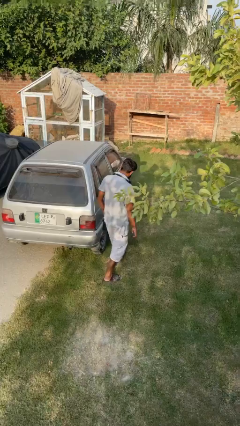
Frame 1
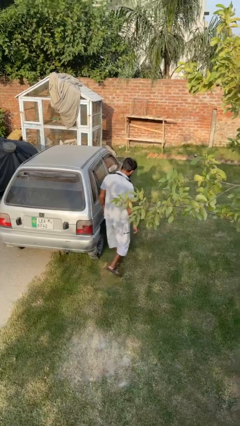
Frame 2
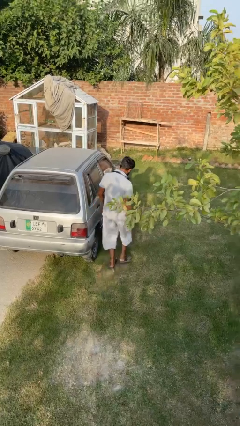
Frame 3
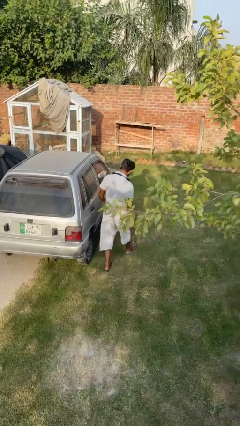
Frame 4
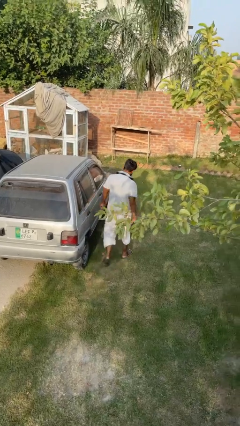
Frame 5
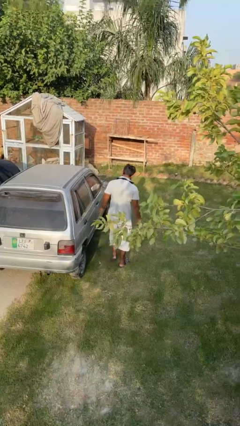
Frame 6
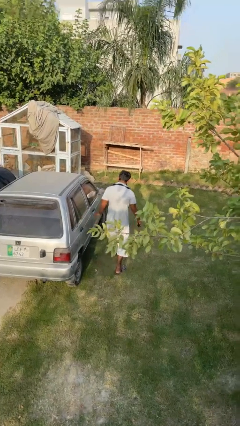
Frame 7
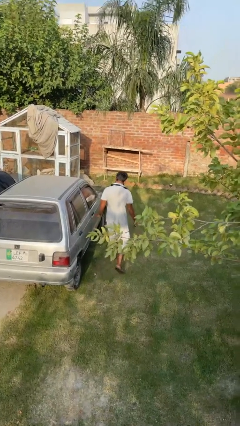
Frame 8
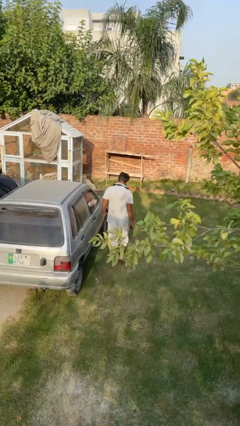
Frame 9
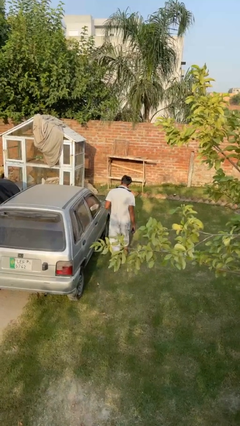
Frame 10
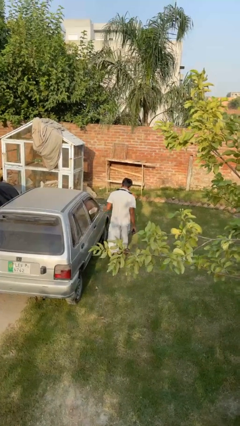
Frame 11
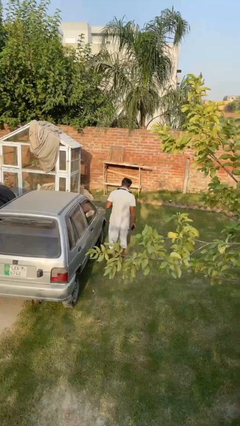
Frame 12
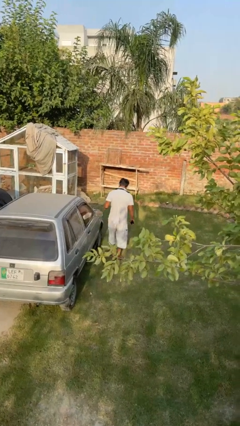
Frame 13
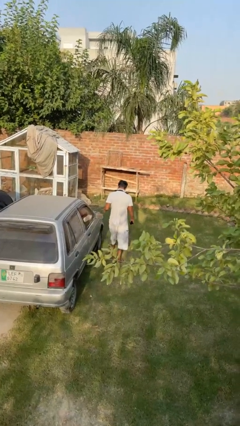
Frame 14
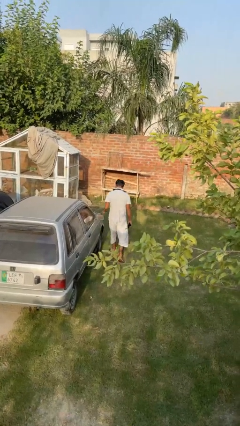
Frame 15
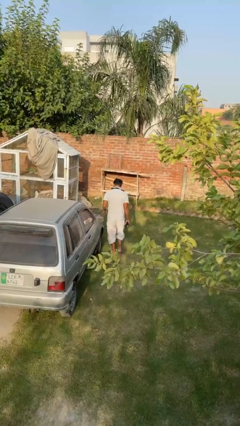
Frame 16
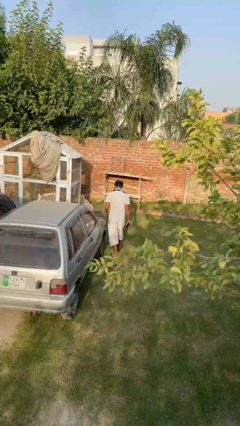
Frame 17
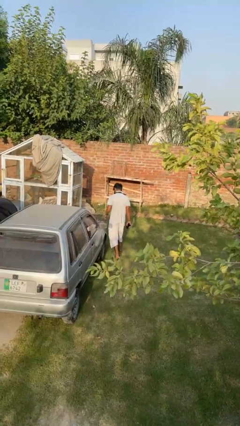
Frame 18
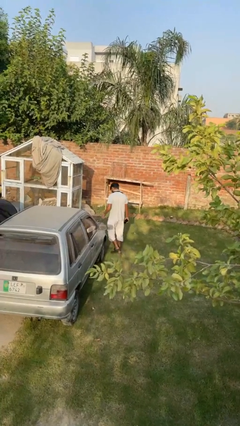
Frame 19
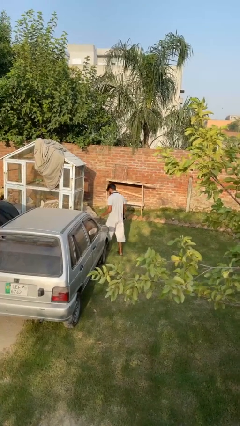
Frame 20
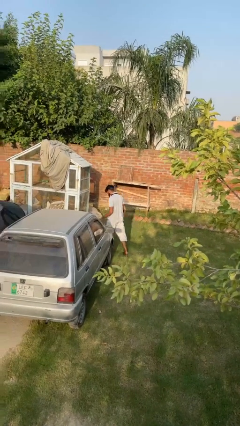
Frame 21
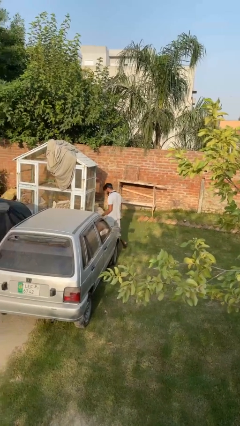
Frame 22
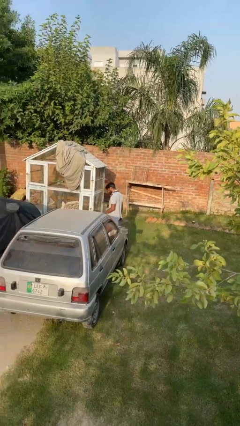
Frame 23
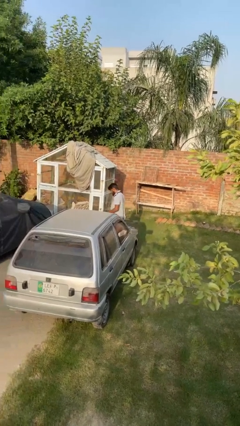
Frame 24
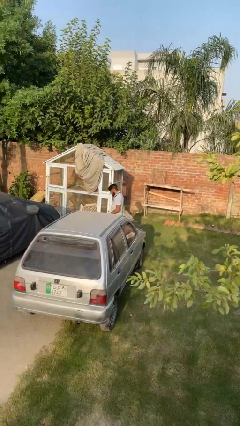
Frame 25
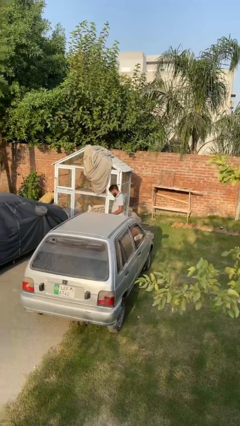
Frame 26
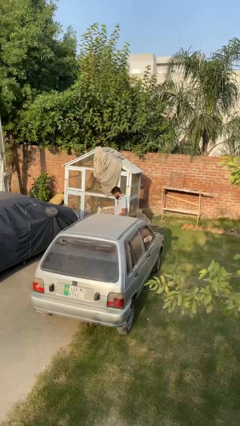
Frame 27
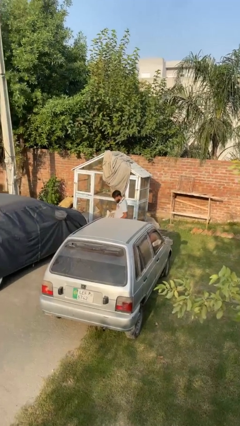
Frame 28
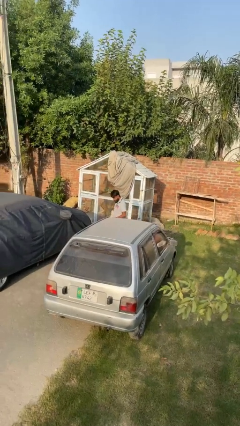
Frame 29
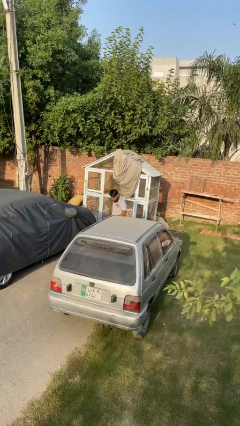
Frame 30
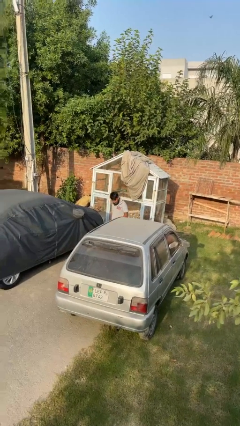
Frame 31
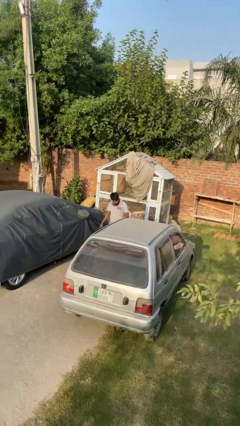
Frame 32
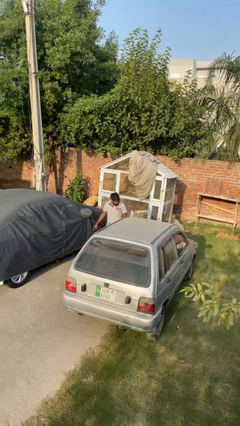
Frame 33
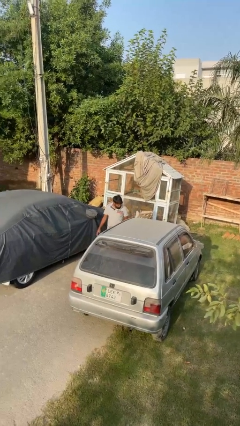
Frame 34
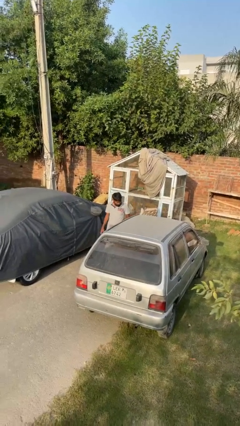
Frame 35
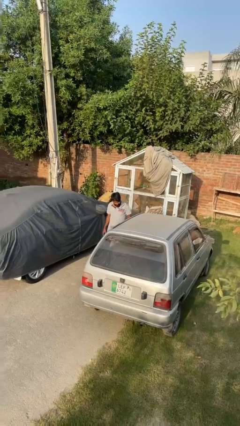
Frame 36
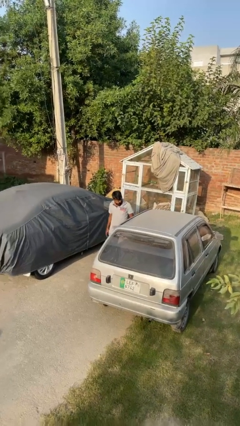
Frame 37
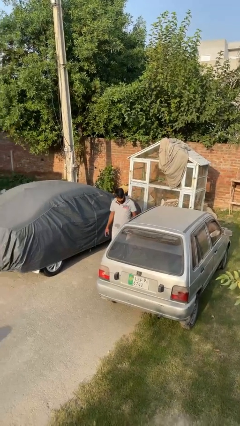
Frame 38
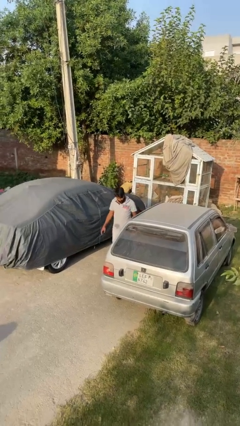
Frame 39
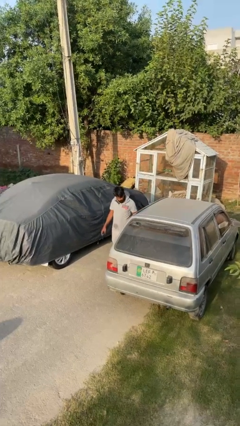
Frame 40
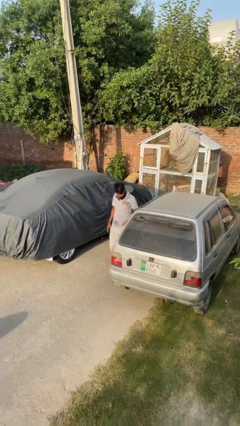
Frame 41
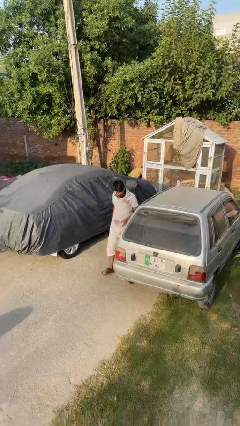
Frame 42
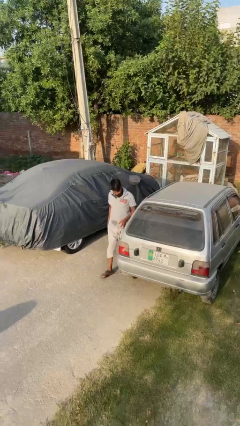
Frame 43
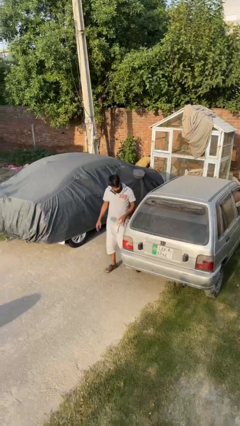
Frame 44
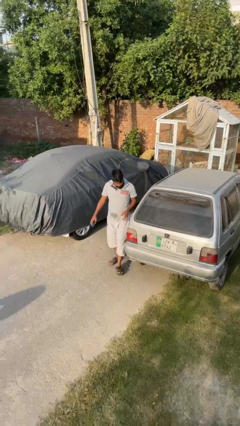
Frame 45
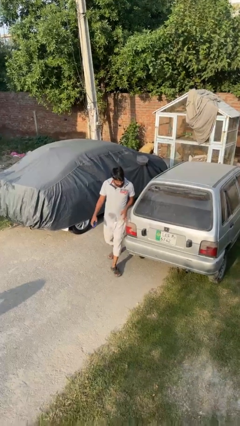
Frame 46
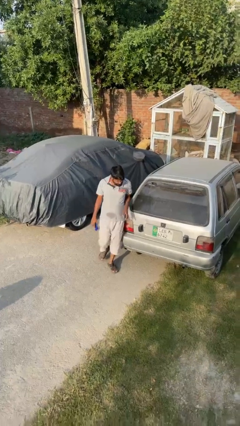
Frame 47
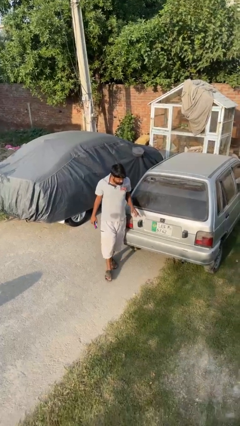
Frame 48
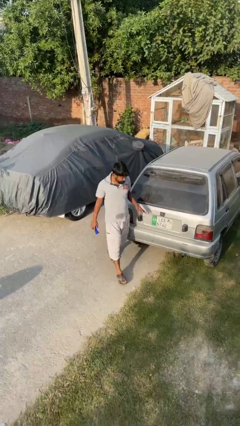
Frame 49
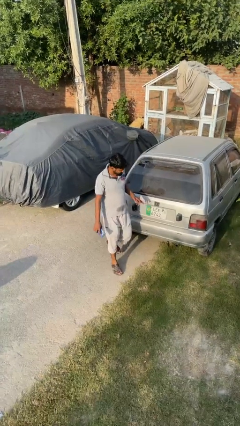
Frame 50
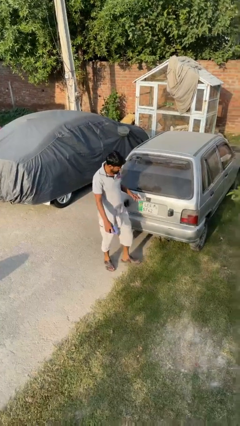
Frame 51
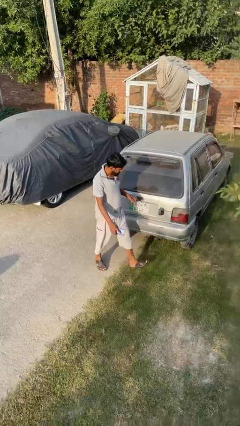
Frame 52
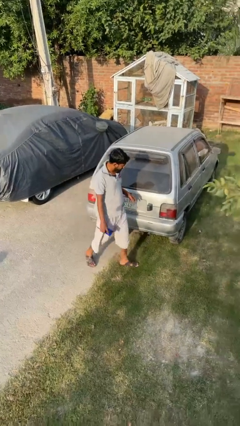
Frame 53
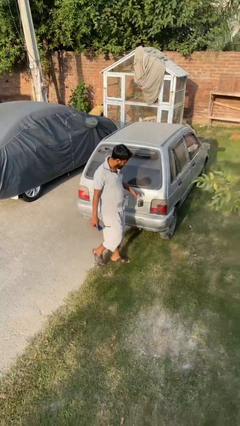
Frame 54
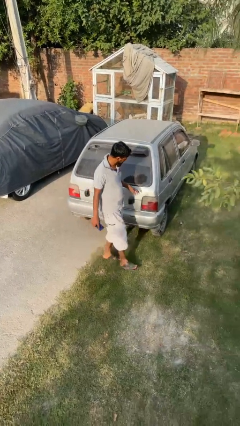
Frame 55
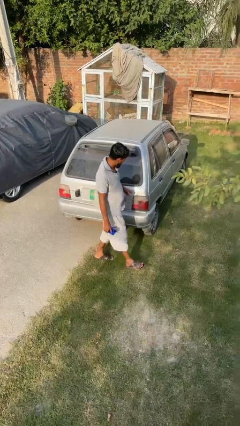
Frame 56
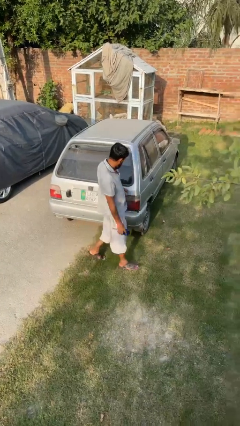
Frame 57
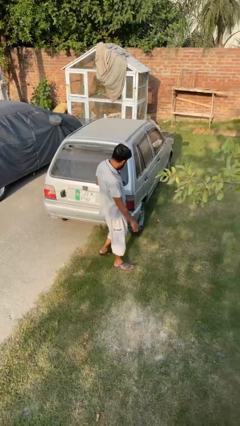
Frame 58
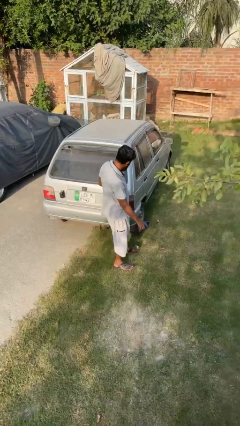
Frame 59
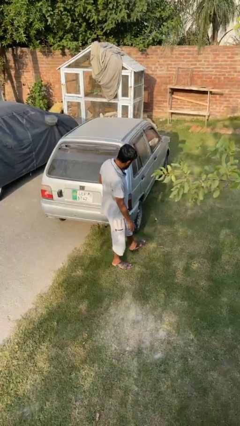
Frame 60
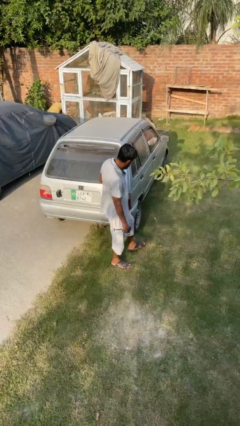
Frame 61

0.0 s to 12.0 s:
person walks around car

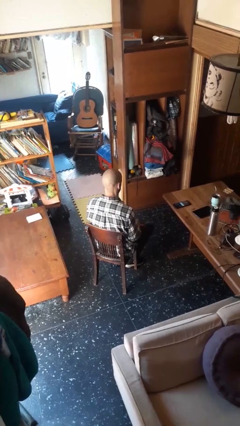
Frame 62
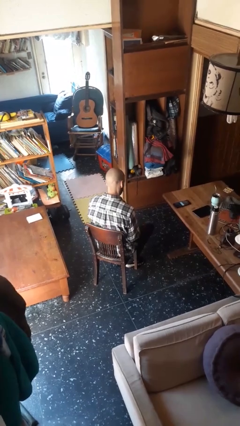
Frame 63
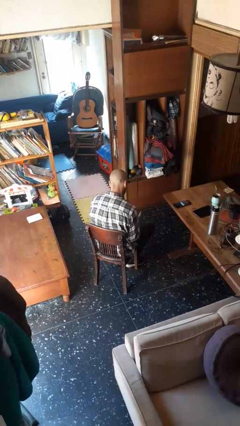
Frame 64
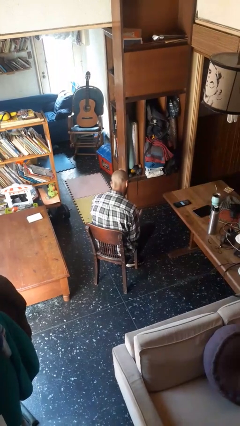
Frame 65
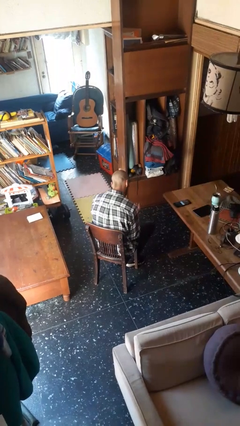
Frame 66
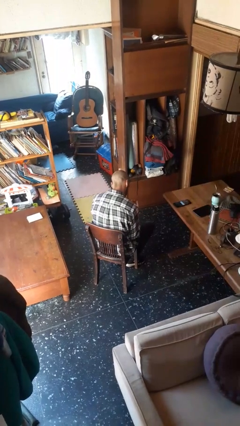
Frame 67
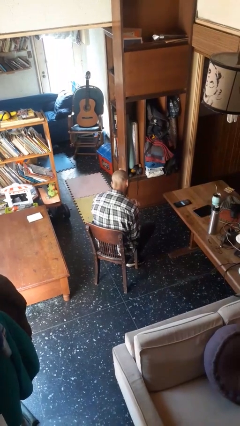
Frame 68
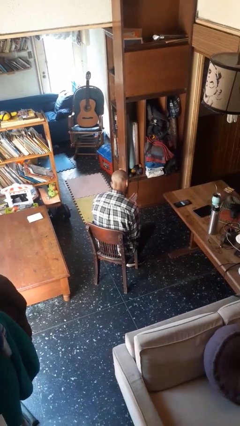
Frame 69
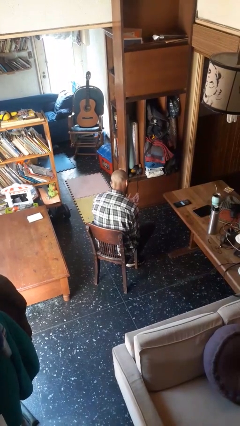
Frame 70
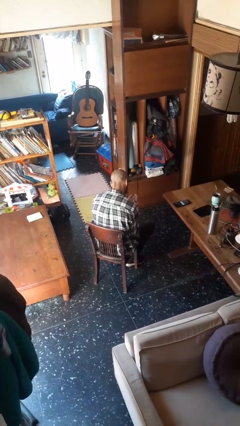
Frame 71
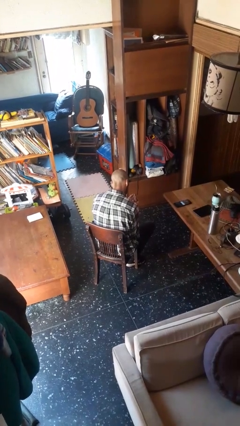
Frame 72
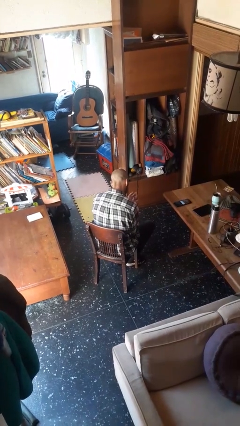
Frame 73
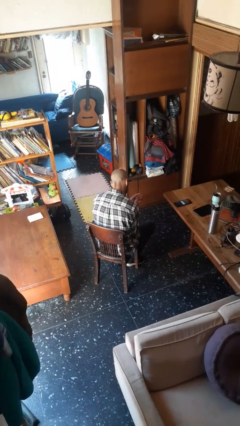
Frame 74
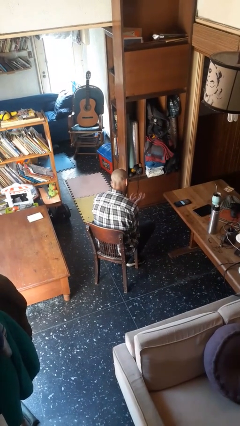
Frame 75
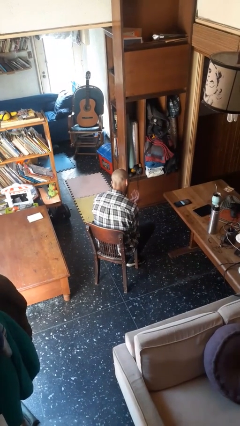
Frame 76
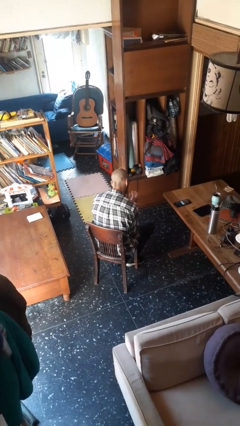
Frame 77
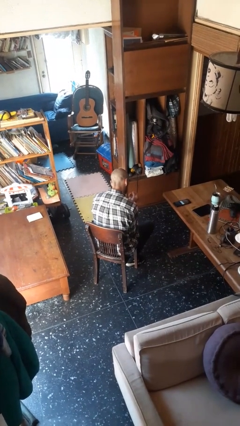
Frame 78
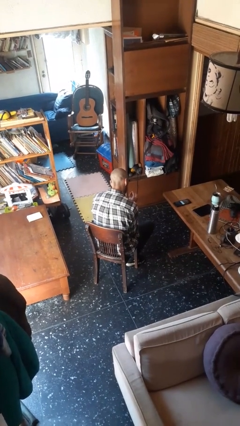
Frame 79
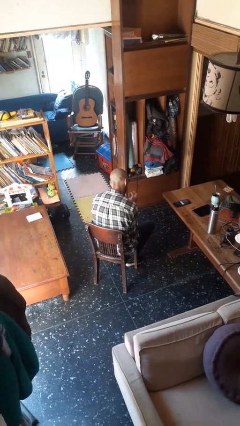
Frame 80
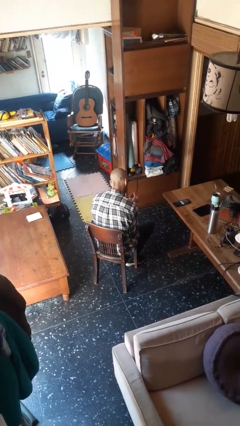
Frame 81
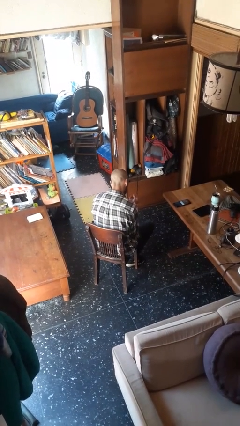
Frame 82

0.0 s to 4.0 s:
person looks at hands in lap

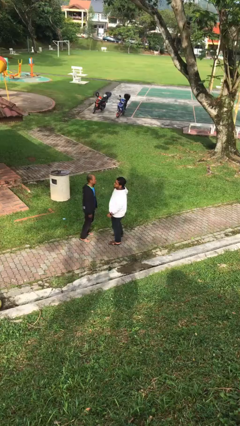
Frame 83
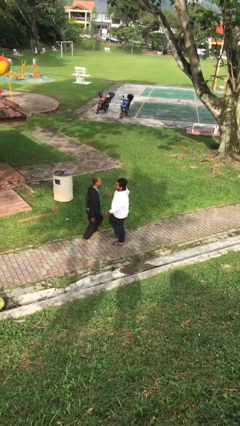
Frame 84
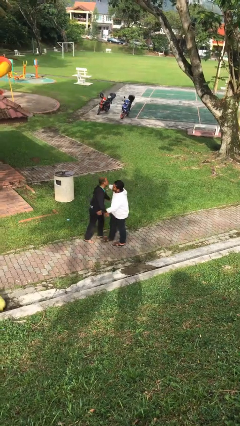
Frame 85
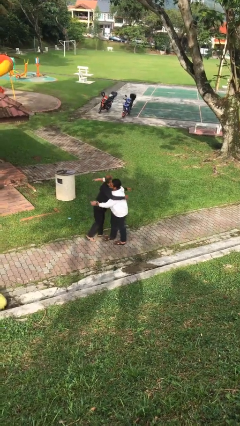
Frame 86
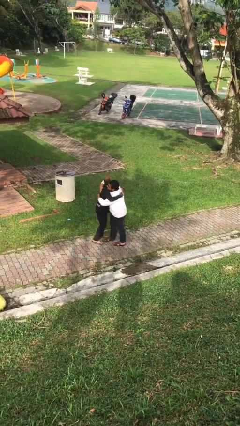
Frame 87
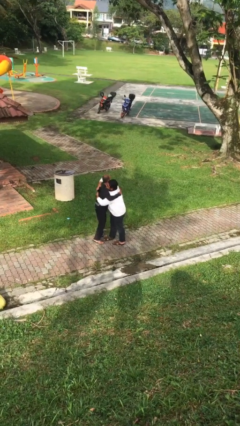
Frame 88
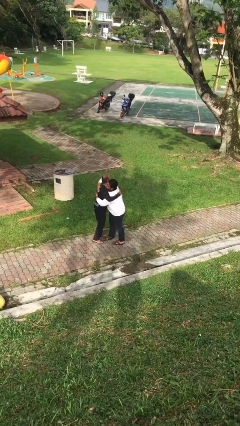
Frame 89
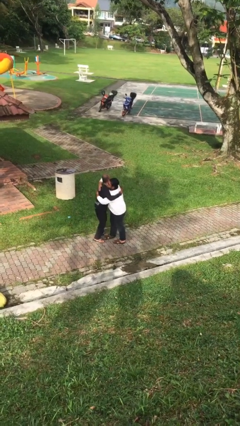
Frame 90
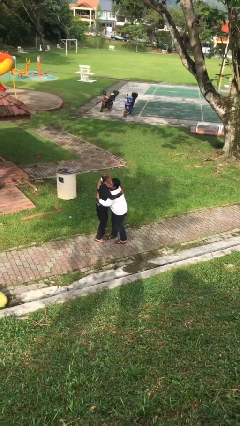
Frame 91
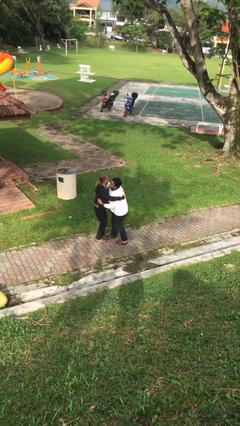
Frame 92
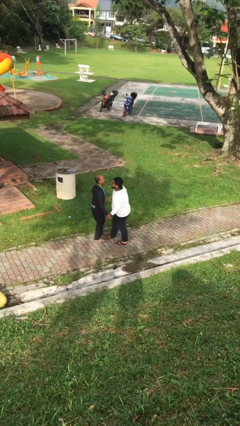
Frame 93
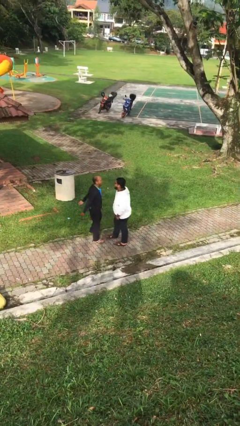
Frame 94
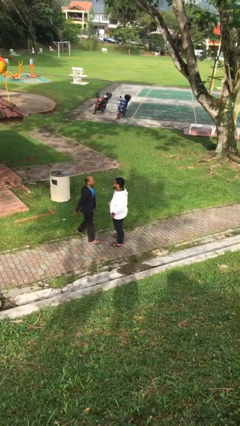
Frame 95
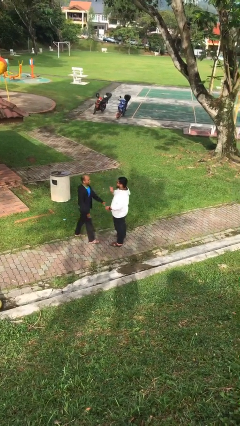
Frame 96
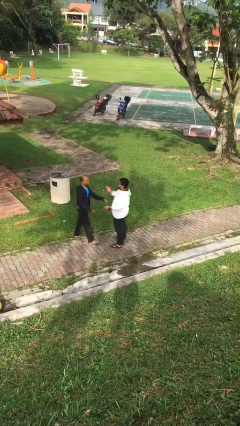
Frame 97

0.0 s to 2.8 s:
person embraces person
